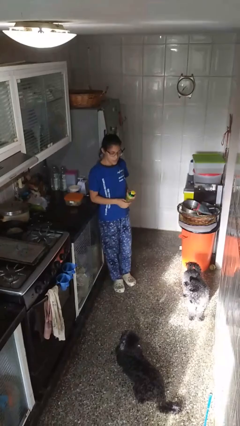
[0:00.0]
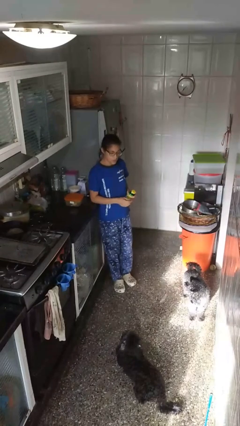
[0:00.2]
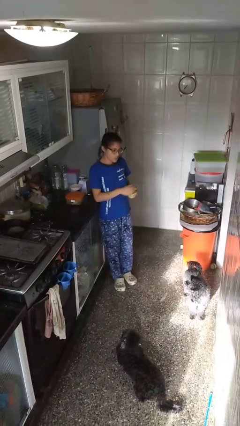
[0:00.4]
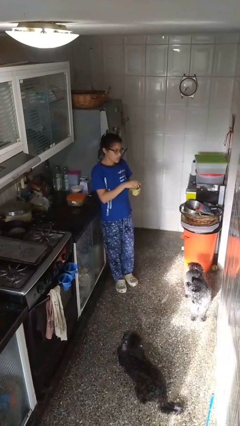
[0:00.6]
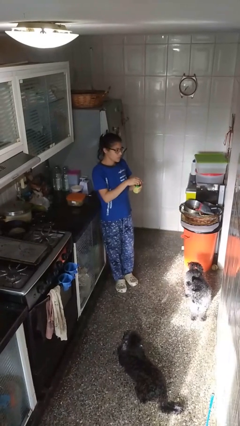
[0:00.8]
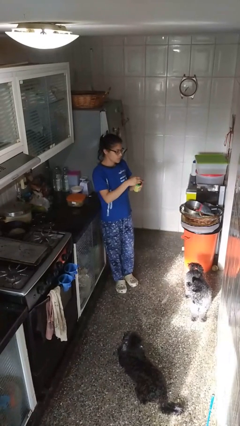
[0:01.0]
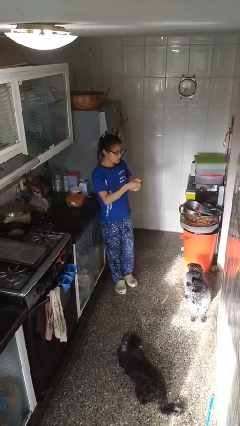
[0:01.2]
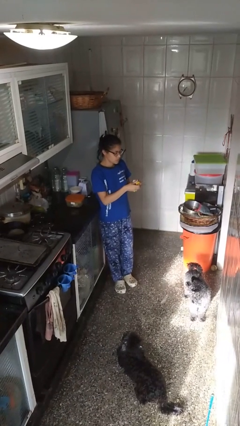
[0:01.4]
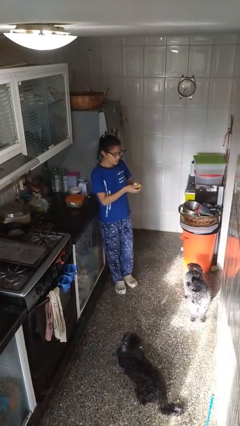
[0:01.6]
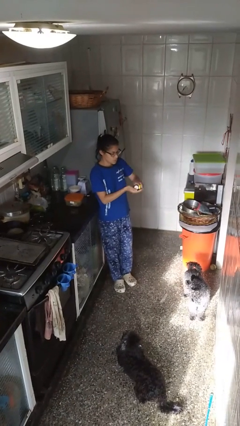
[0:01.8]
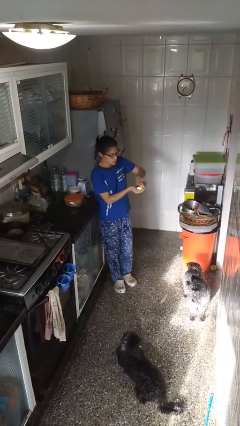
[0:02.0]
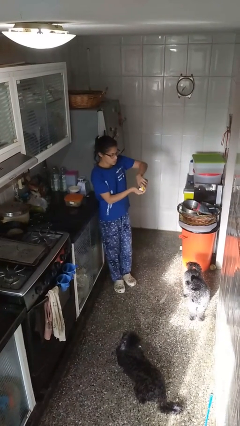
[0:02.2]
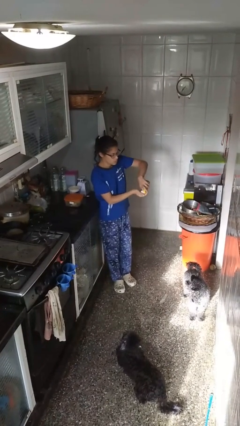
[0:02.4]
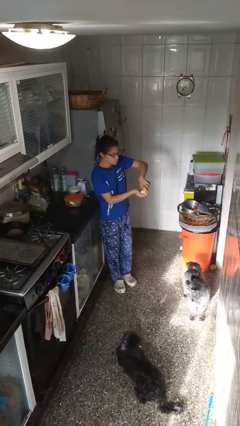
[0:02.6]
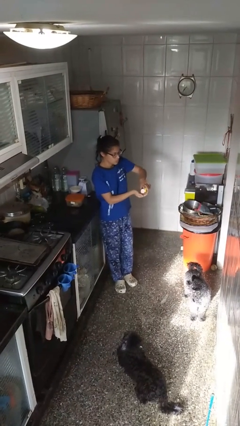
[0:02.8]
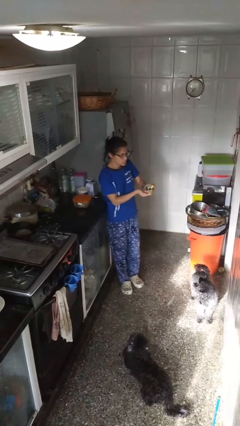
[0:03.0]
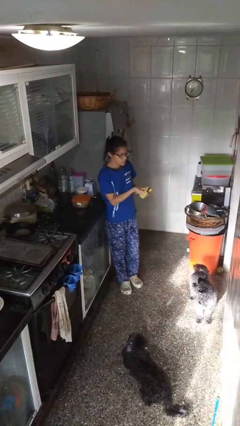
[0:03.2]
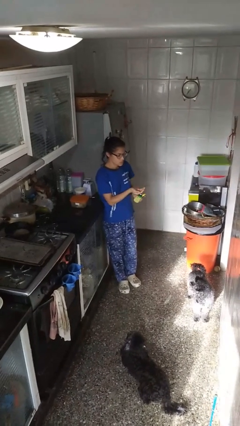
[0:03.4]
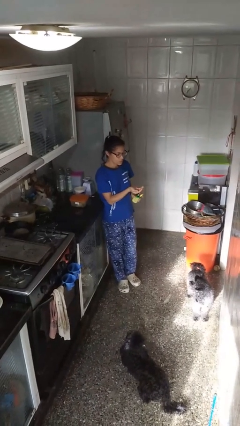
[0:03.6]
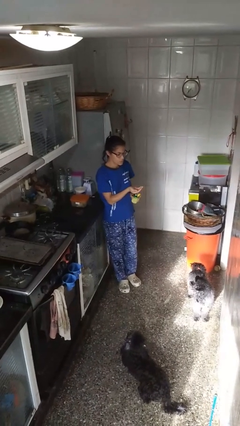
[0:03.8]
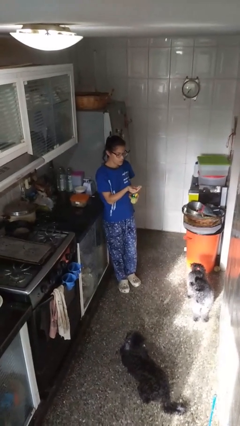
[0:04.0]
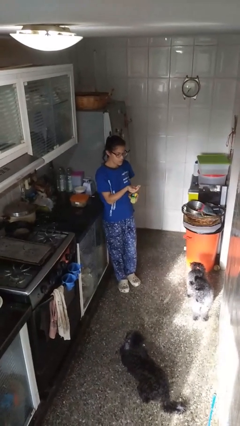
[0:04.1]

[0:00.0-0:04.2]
person takes medicine pills

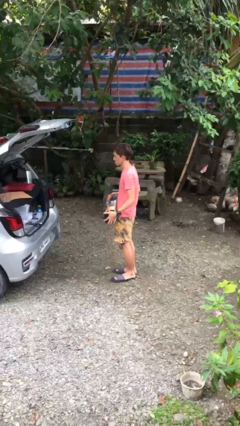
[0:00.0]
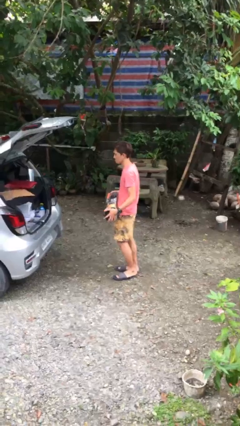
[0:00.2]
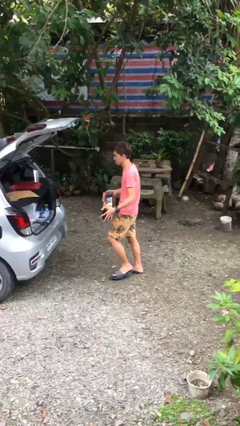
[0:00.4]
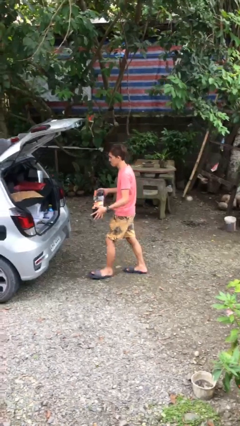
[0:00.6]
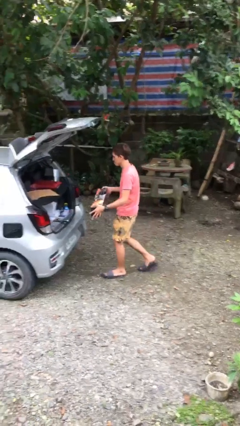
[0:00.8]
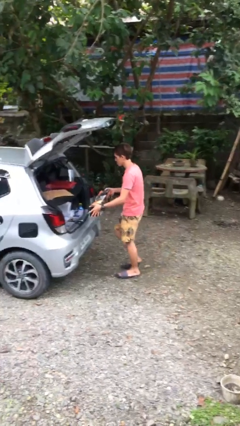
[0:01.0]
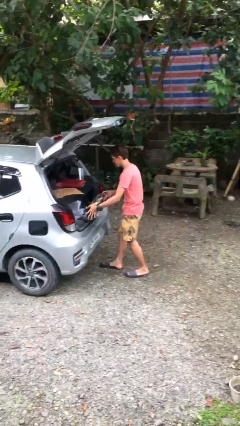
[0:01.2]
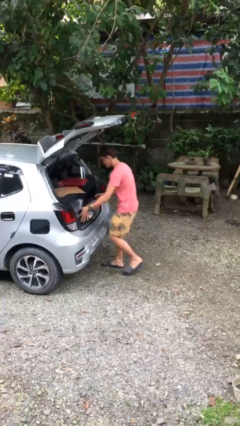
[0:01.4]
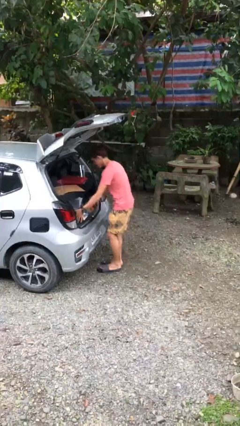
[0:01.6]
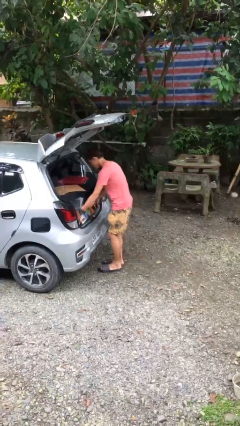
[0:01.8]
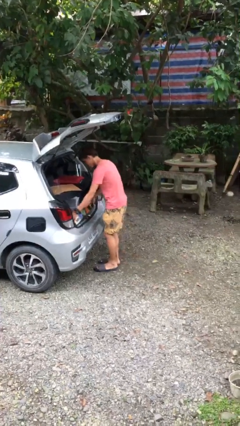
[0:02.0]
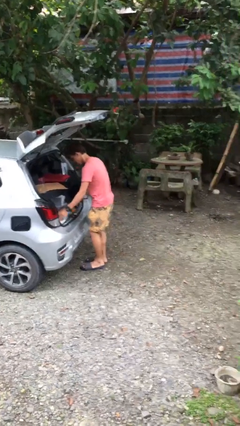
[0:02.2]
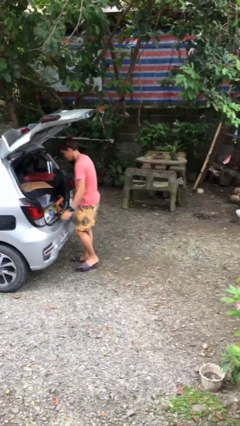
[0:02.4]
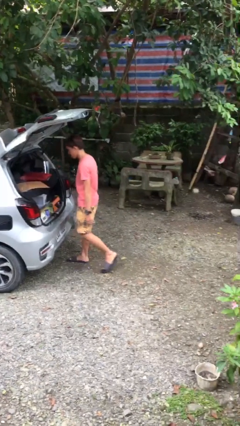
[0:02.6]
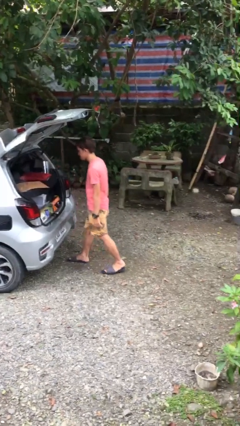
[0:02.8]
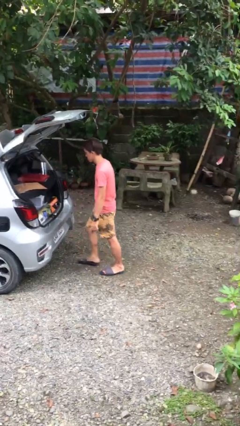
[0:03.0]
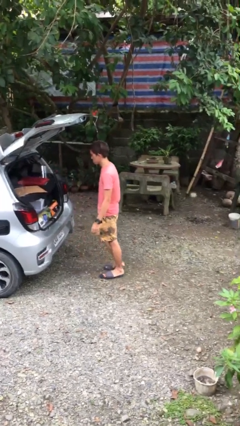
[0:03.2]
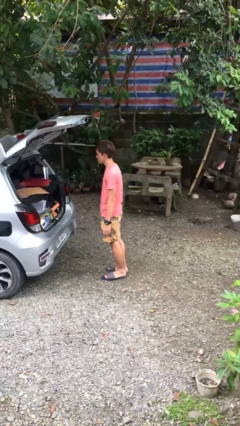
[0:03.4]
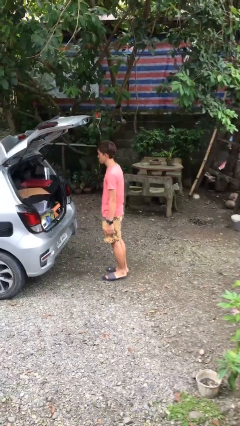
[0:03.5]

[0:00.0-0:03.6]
person loads car

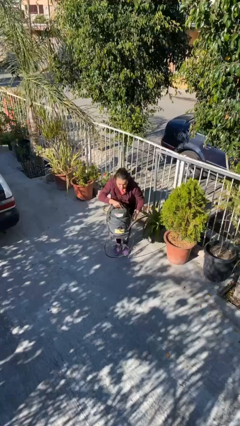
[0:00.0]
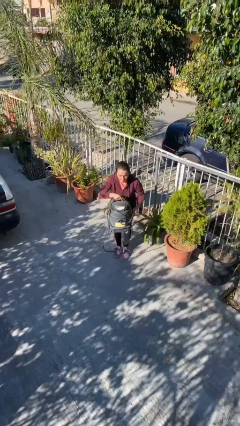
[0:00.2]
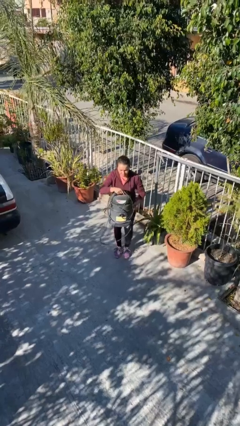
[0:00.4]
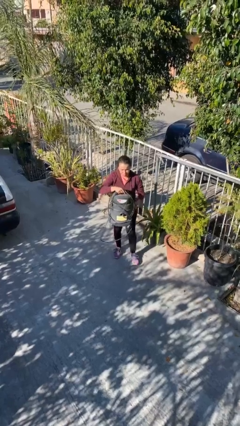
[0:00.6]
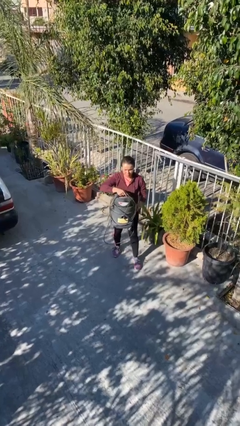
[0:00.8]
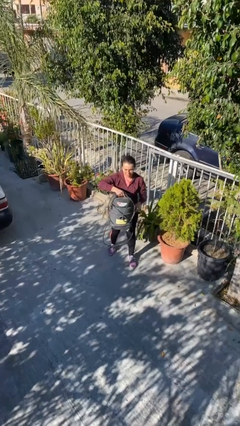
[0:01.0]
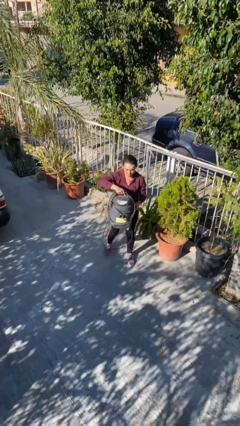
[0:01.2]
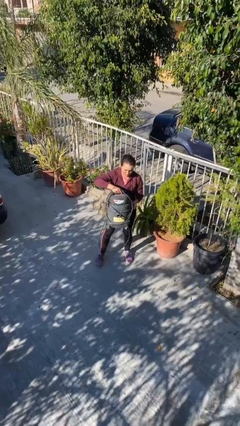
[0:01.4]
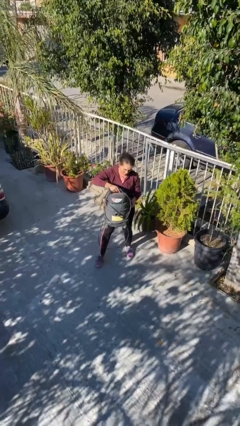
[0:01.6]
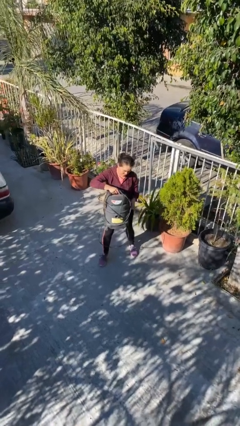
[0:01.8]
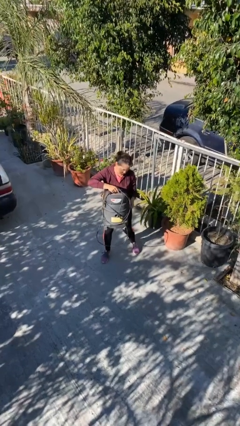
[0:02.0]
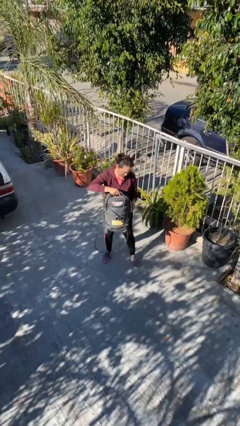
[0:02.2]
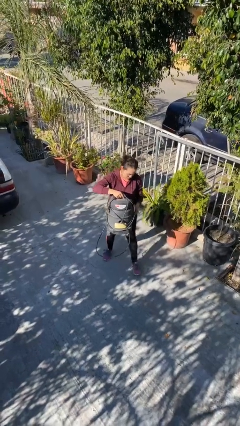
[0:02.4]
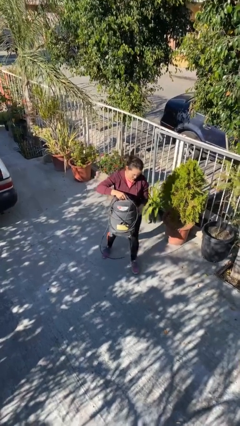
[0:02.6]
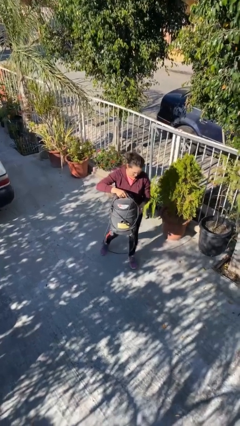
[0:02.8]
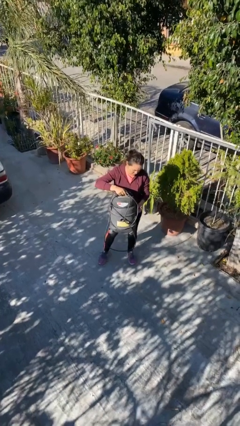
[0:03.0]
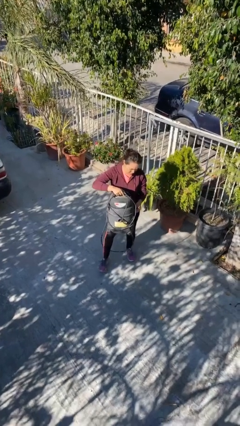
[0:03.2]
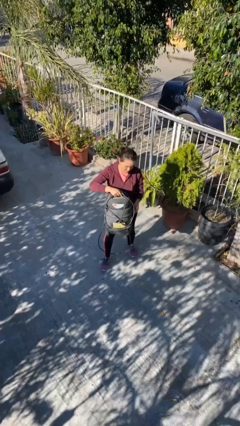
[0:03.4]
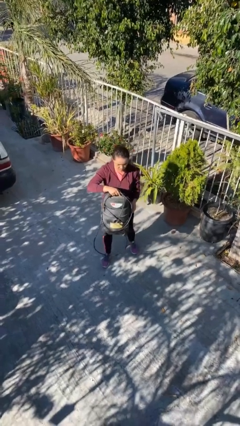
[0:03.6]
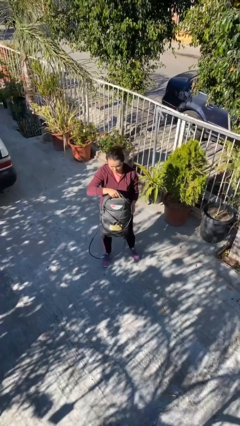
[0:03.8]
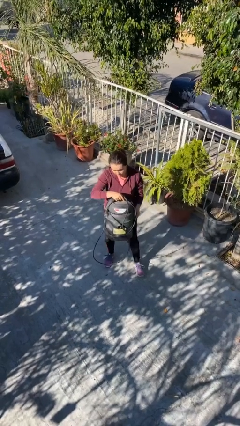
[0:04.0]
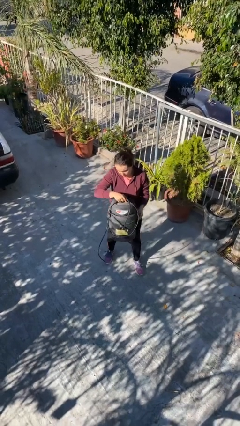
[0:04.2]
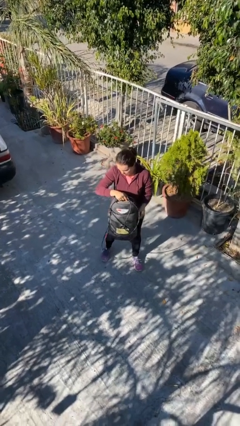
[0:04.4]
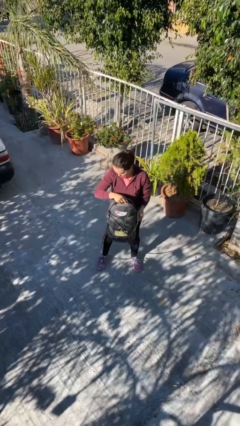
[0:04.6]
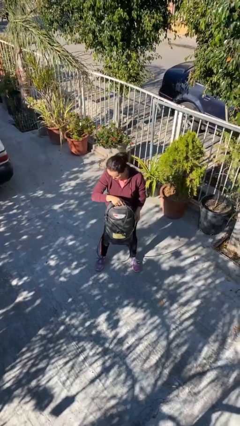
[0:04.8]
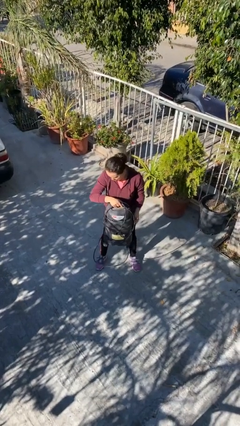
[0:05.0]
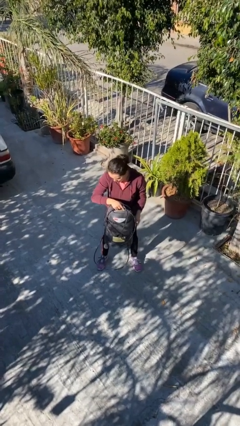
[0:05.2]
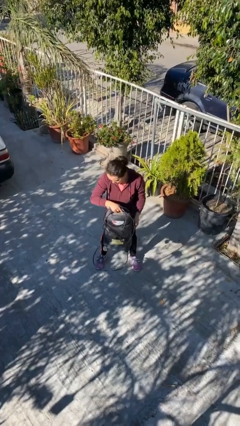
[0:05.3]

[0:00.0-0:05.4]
person carries heavy object

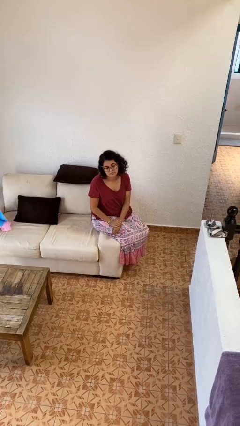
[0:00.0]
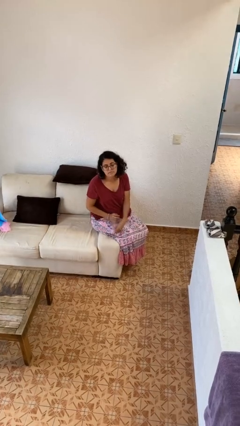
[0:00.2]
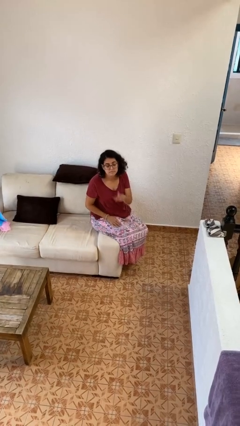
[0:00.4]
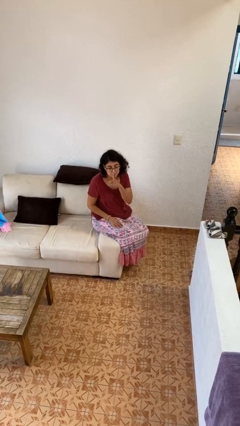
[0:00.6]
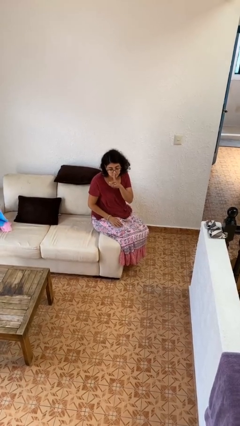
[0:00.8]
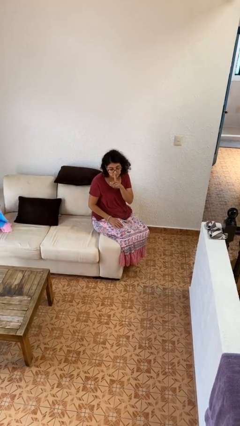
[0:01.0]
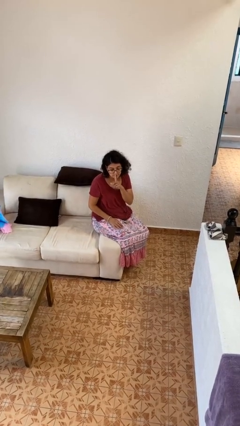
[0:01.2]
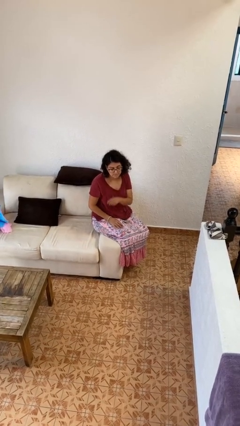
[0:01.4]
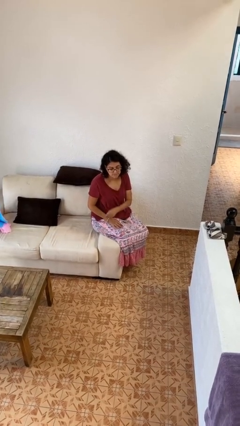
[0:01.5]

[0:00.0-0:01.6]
person gestures be quiet

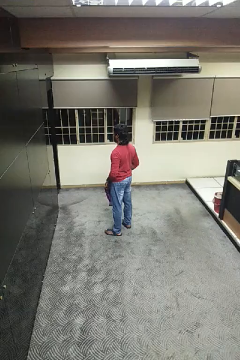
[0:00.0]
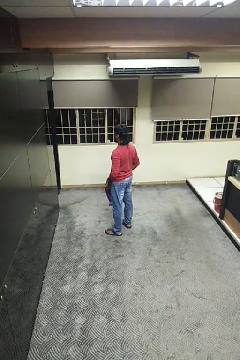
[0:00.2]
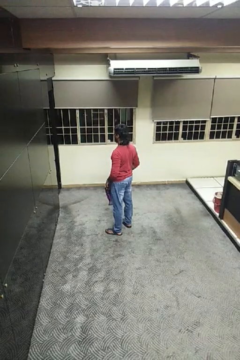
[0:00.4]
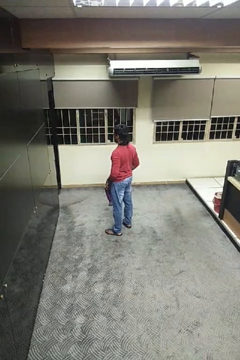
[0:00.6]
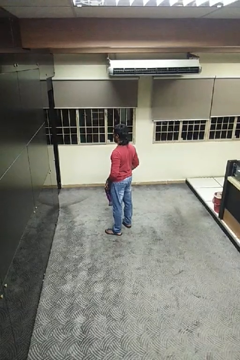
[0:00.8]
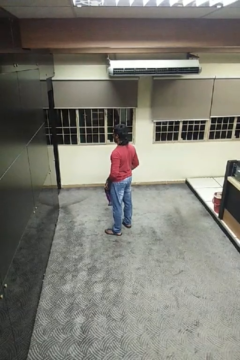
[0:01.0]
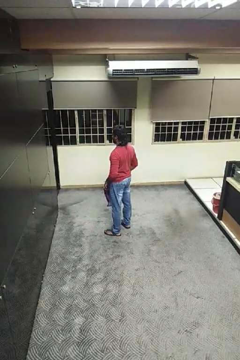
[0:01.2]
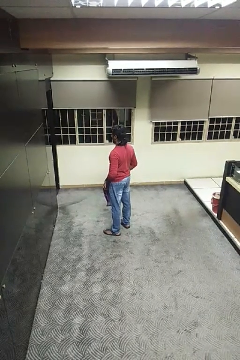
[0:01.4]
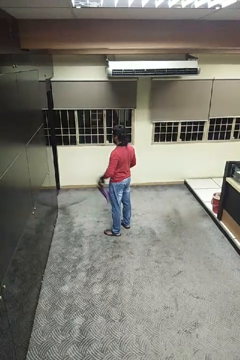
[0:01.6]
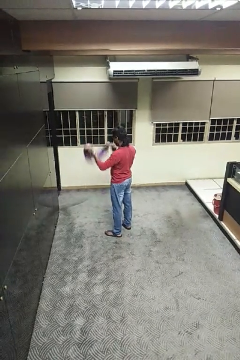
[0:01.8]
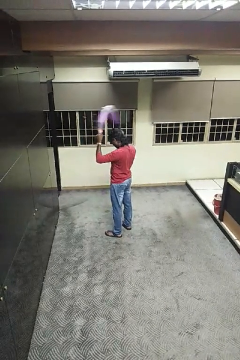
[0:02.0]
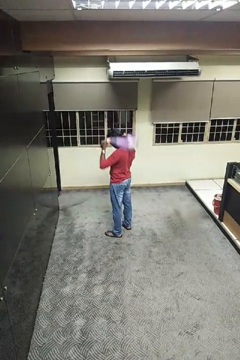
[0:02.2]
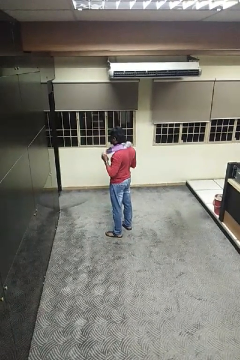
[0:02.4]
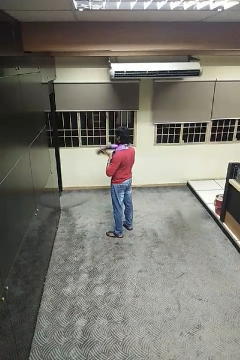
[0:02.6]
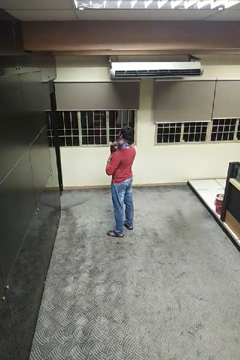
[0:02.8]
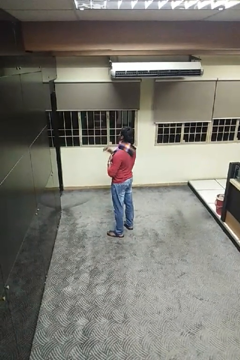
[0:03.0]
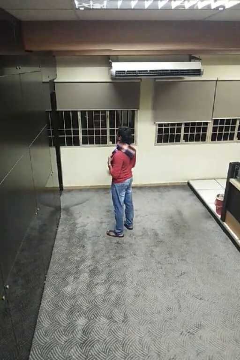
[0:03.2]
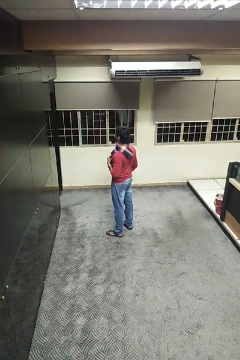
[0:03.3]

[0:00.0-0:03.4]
person puts on scarf
